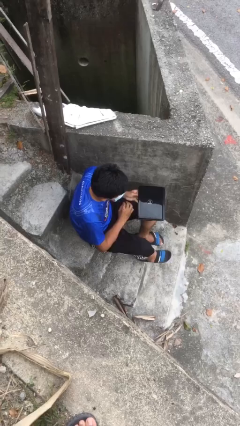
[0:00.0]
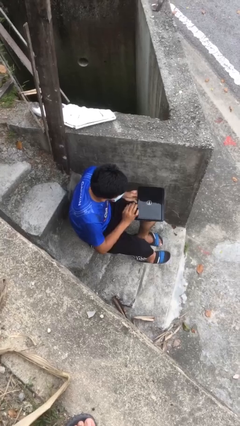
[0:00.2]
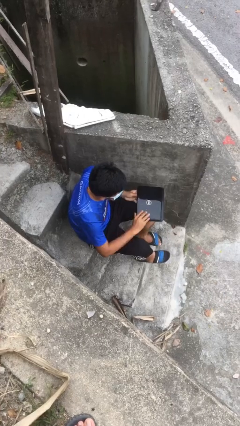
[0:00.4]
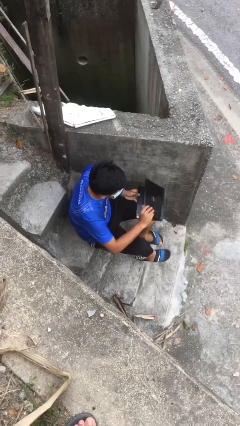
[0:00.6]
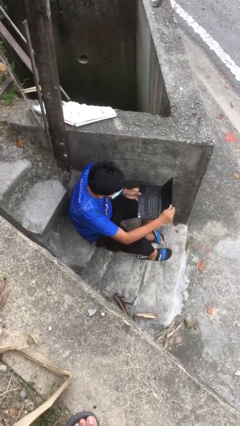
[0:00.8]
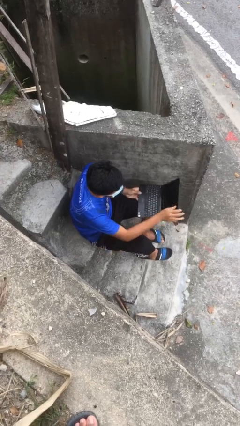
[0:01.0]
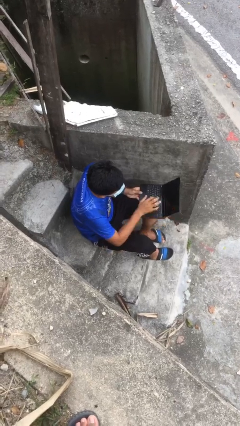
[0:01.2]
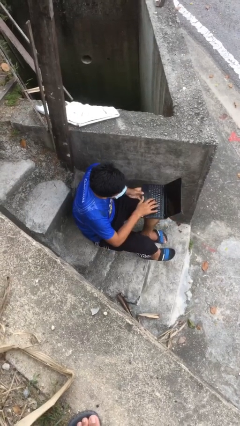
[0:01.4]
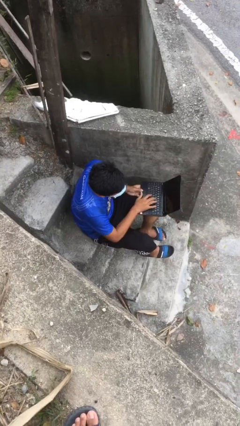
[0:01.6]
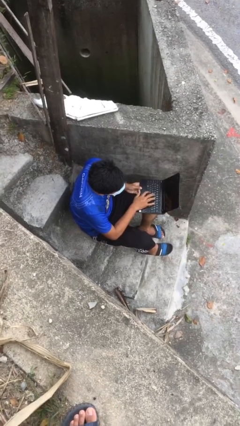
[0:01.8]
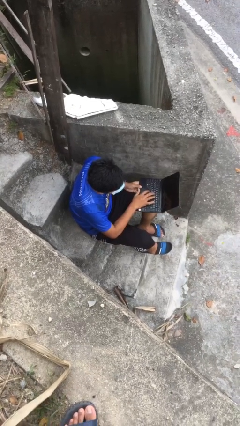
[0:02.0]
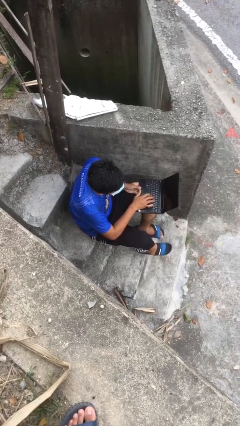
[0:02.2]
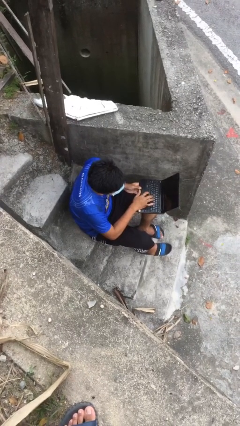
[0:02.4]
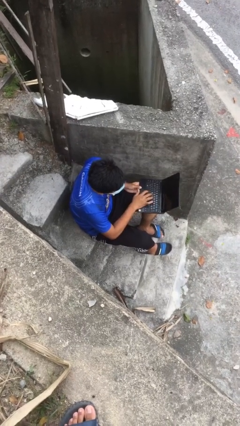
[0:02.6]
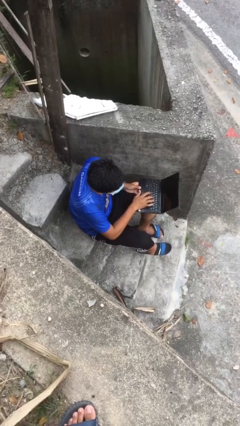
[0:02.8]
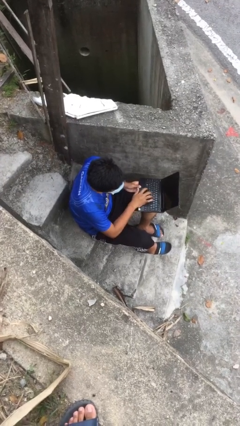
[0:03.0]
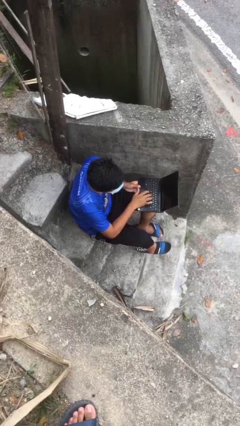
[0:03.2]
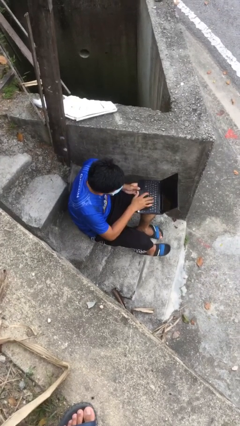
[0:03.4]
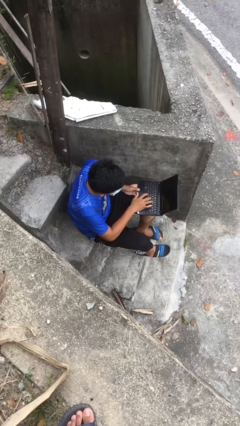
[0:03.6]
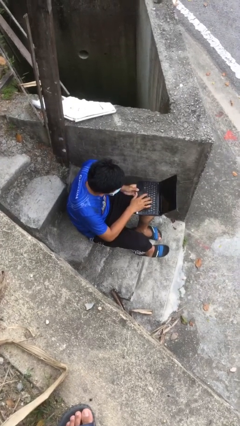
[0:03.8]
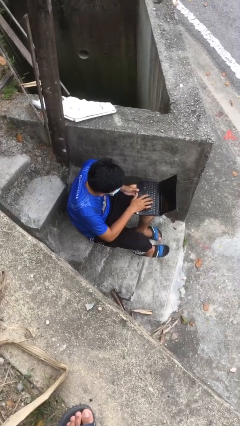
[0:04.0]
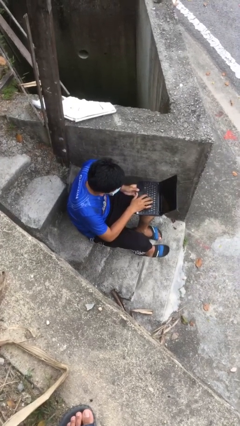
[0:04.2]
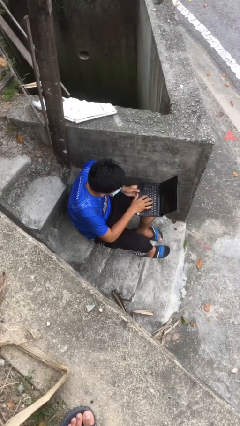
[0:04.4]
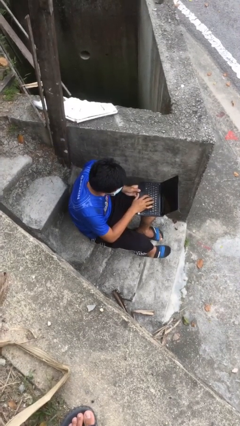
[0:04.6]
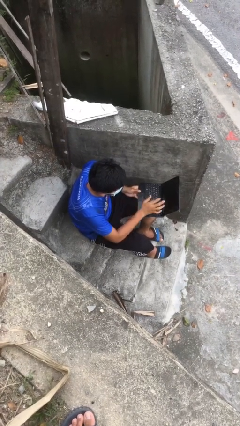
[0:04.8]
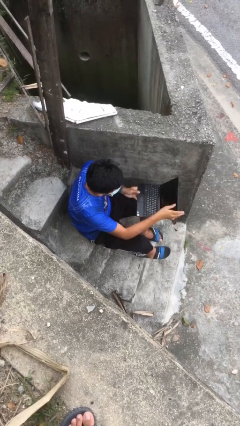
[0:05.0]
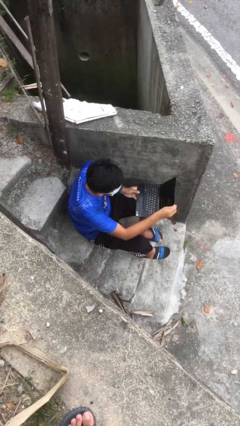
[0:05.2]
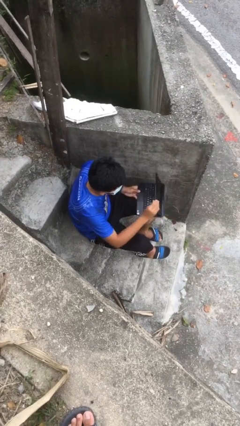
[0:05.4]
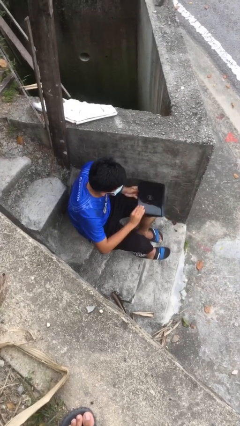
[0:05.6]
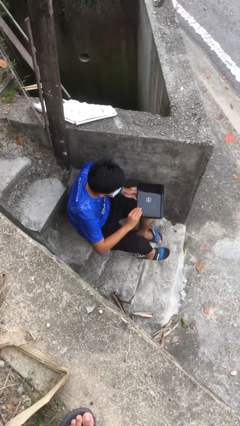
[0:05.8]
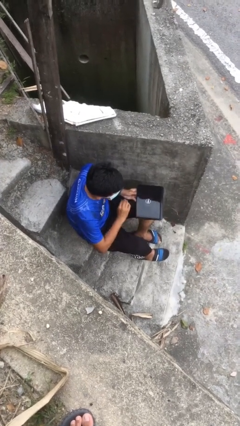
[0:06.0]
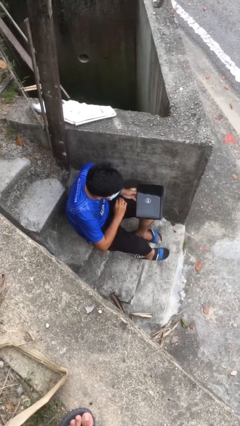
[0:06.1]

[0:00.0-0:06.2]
person interacts with laptop

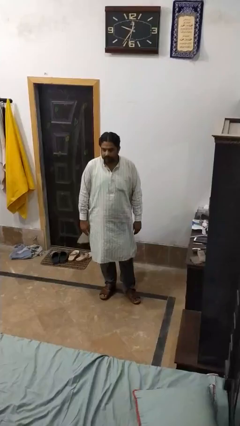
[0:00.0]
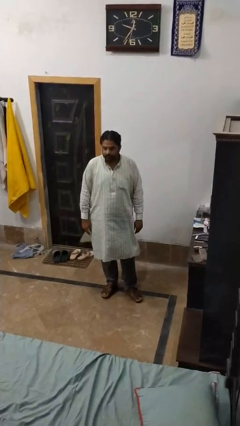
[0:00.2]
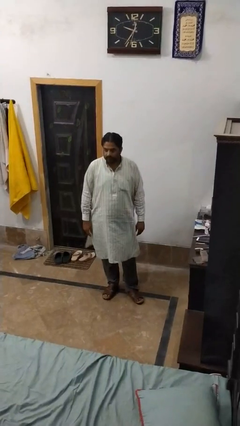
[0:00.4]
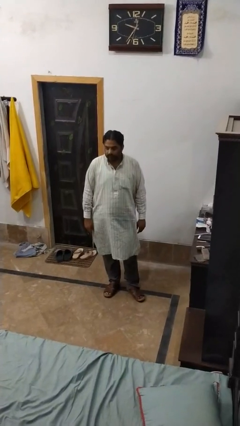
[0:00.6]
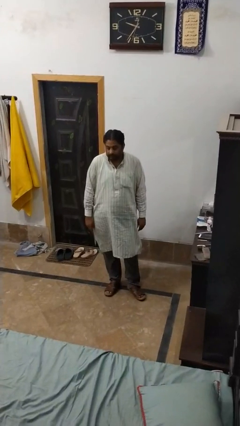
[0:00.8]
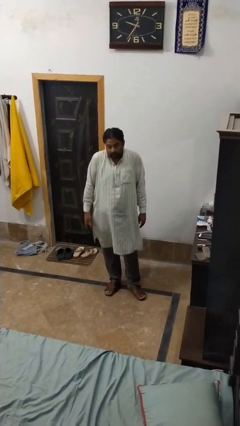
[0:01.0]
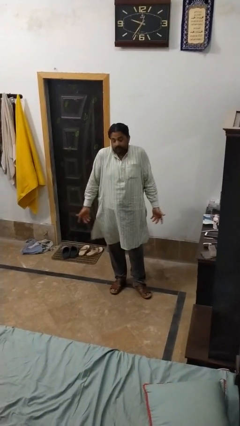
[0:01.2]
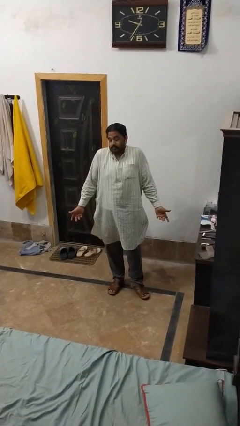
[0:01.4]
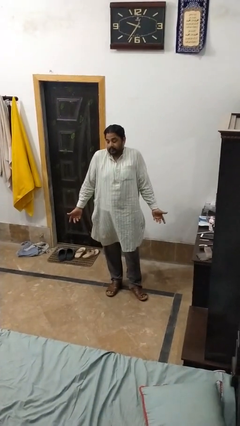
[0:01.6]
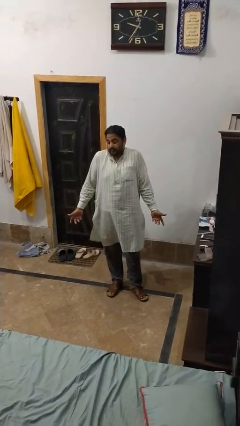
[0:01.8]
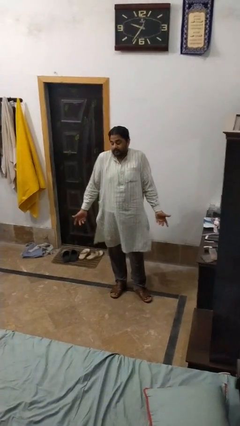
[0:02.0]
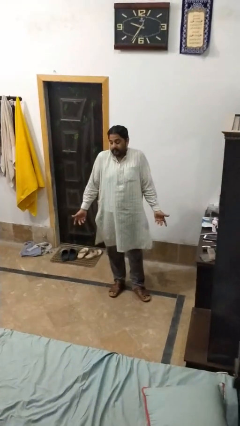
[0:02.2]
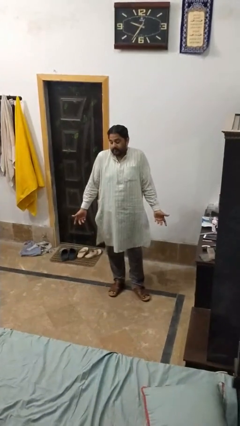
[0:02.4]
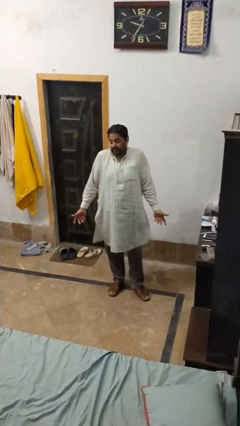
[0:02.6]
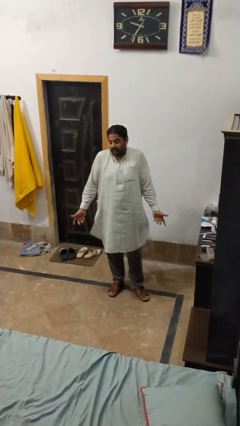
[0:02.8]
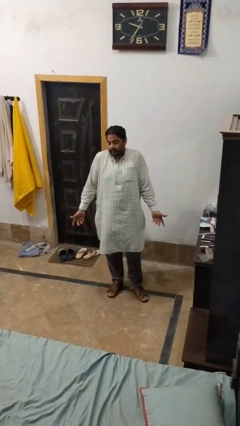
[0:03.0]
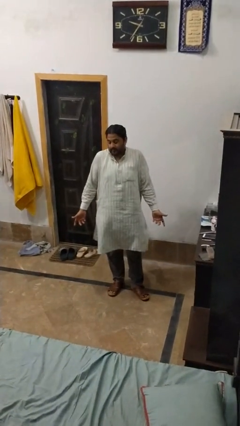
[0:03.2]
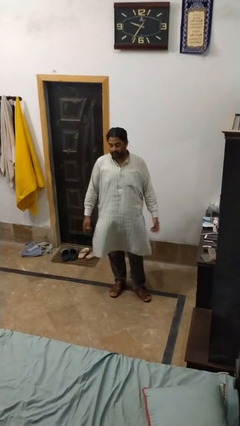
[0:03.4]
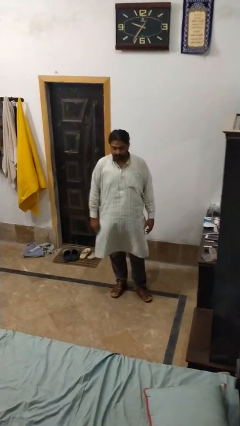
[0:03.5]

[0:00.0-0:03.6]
person shrugs

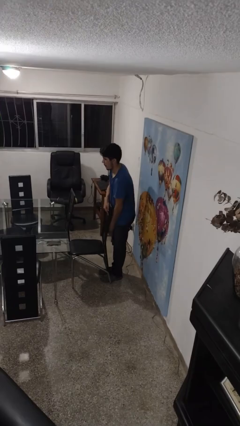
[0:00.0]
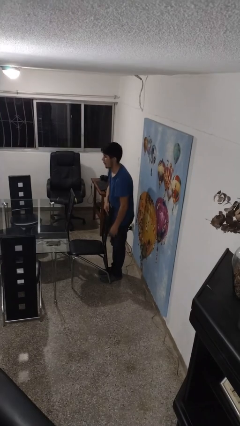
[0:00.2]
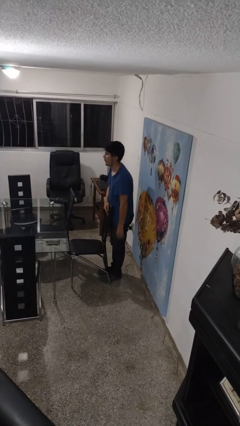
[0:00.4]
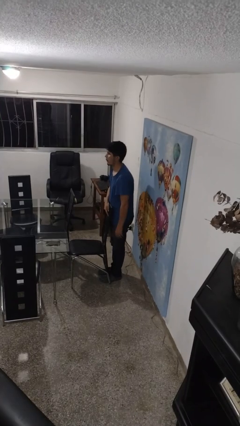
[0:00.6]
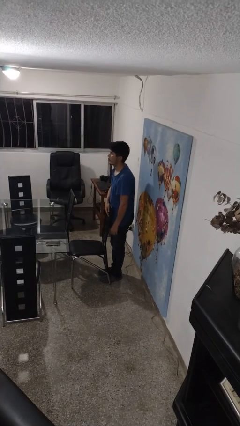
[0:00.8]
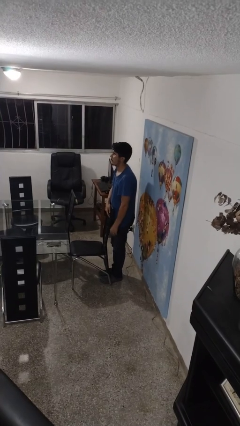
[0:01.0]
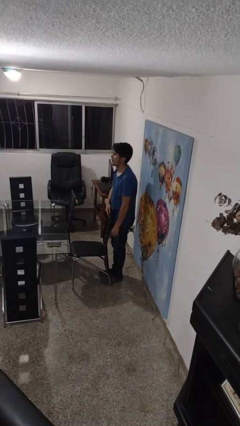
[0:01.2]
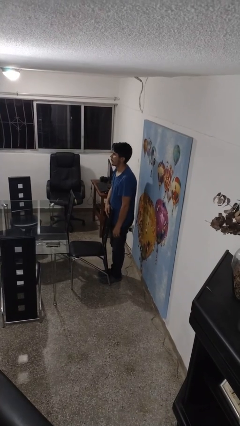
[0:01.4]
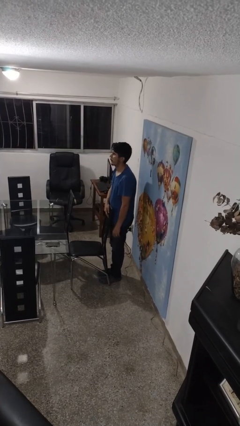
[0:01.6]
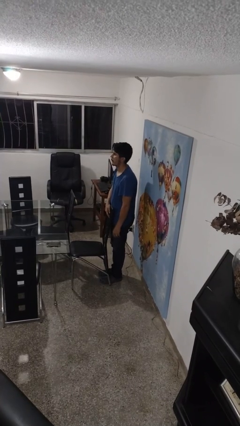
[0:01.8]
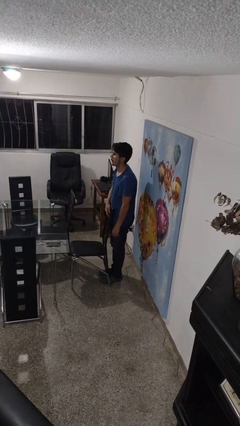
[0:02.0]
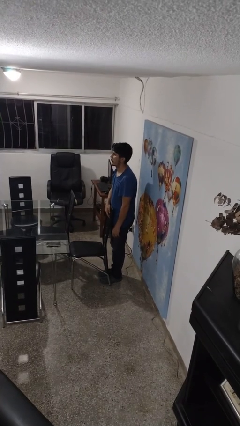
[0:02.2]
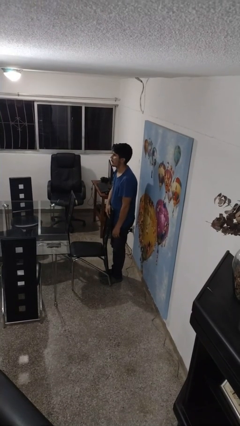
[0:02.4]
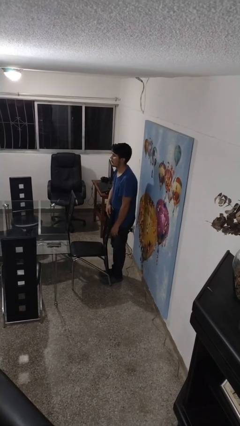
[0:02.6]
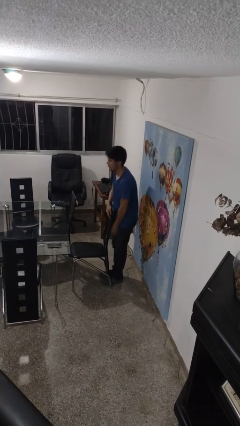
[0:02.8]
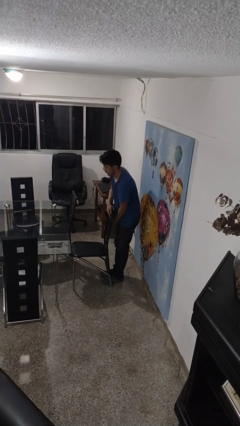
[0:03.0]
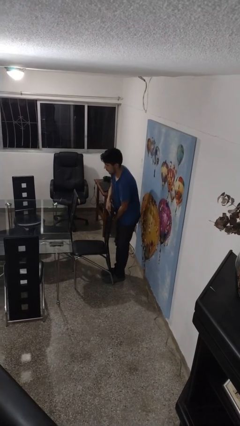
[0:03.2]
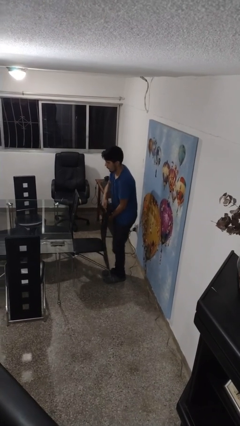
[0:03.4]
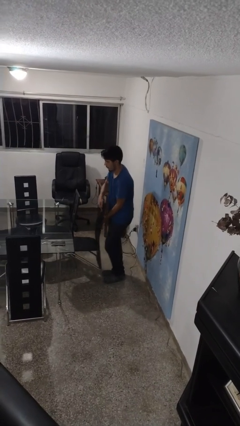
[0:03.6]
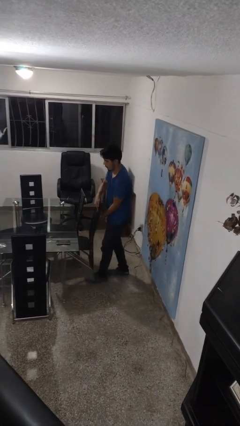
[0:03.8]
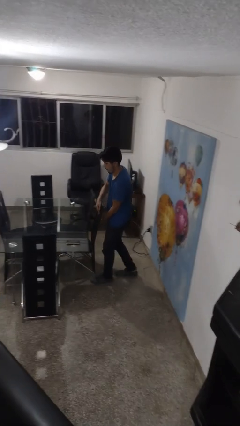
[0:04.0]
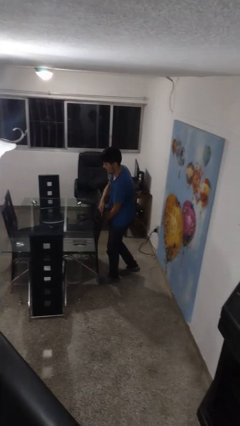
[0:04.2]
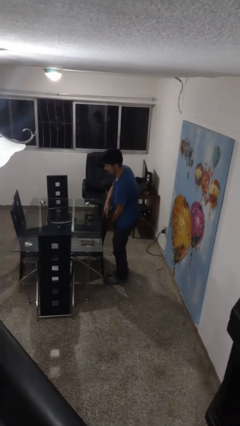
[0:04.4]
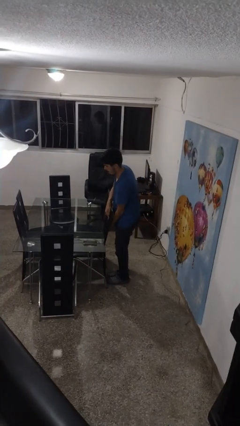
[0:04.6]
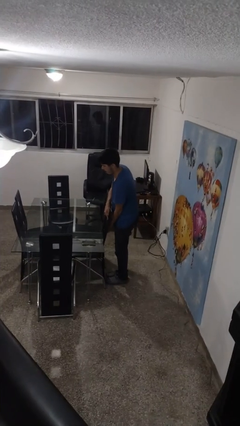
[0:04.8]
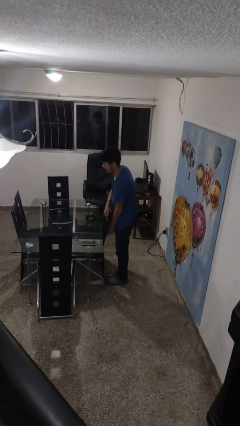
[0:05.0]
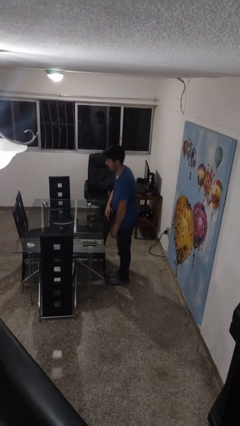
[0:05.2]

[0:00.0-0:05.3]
person pushes in chair

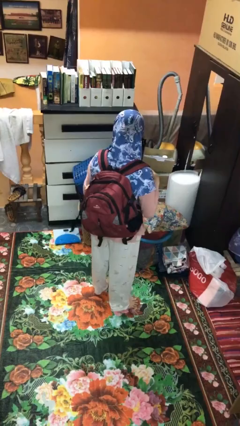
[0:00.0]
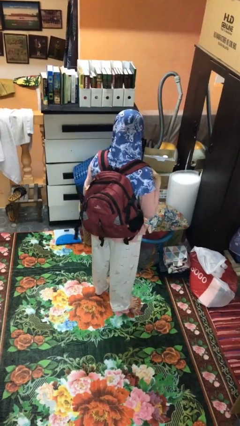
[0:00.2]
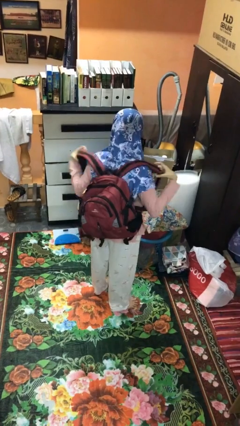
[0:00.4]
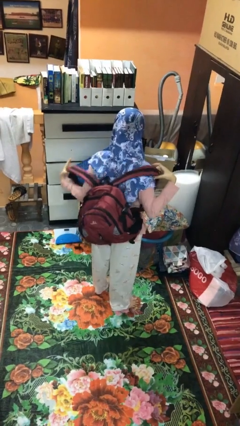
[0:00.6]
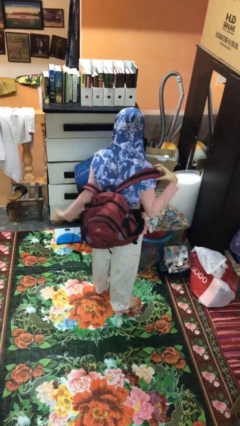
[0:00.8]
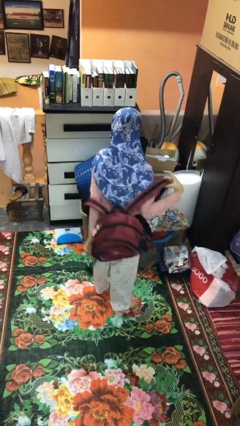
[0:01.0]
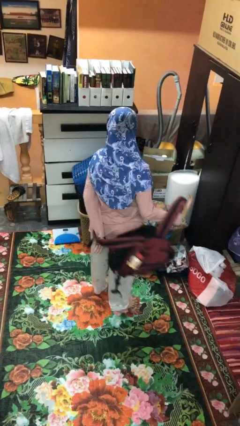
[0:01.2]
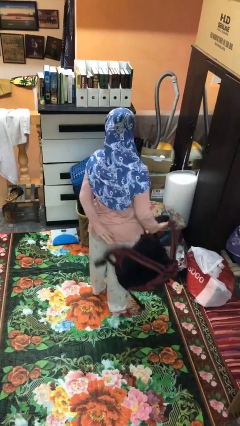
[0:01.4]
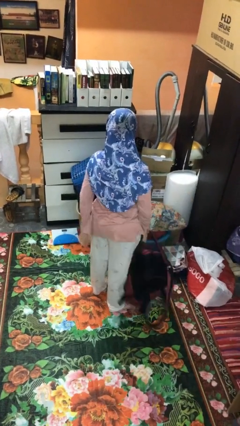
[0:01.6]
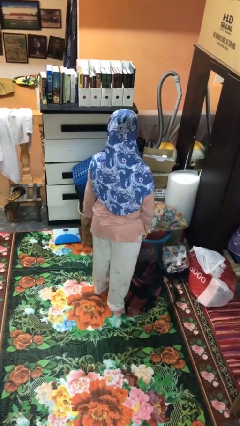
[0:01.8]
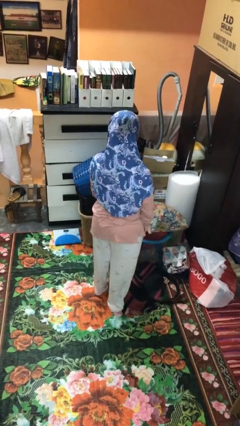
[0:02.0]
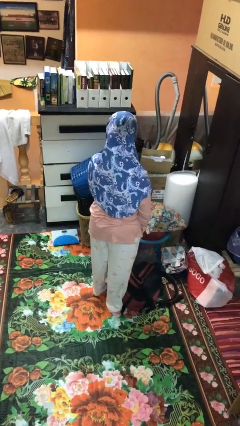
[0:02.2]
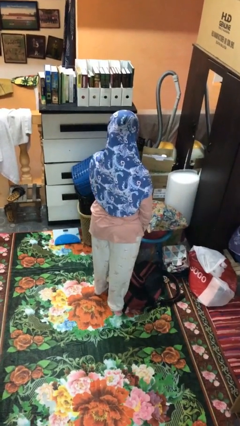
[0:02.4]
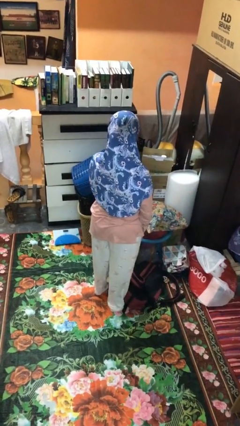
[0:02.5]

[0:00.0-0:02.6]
person takes off backpack
